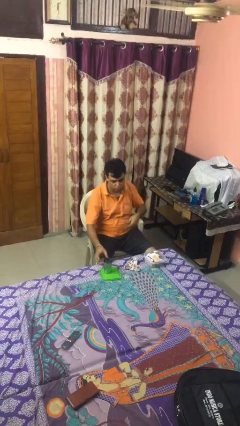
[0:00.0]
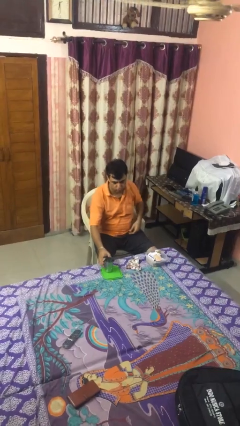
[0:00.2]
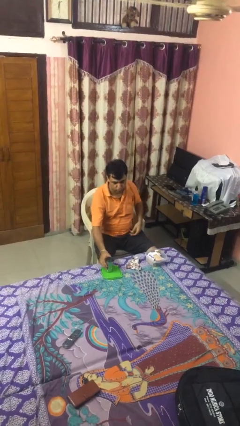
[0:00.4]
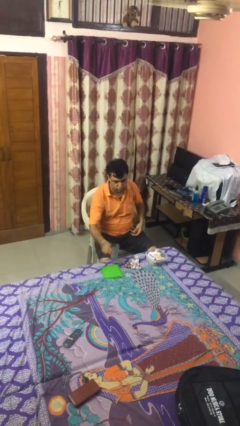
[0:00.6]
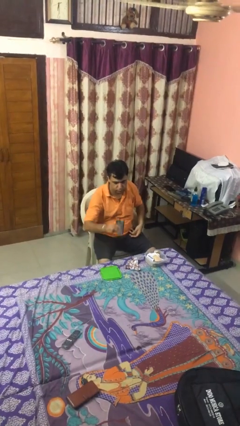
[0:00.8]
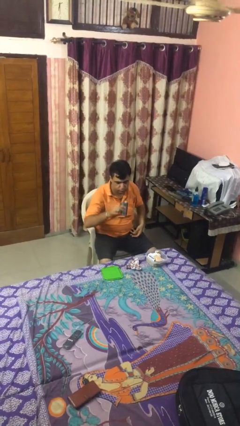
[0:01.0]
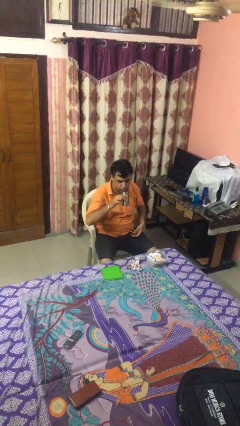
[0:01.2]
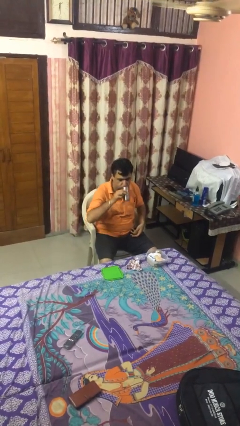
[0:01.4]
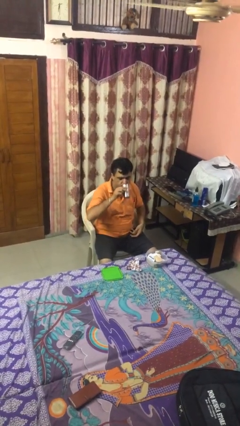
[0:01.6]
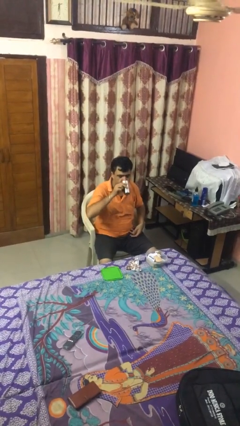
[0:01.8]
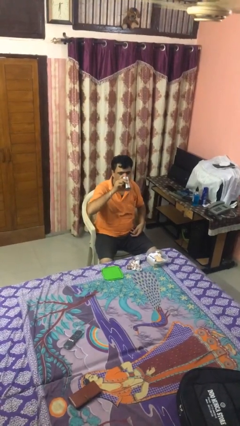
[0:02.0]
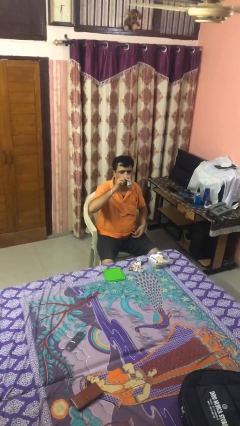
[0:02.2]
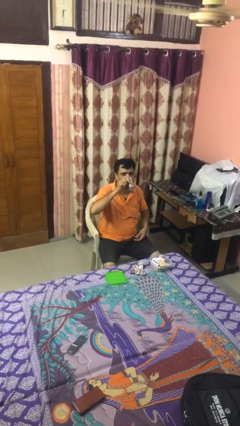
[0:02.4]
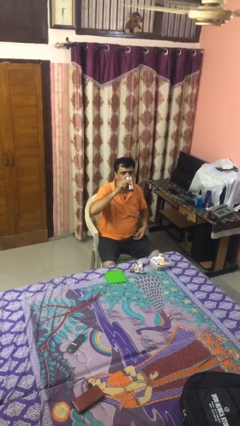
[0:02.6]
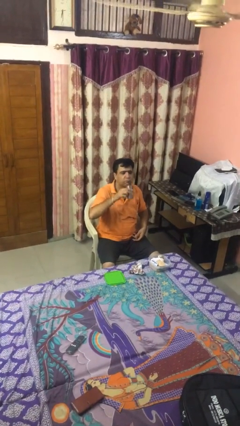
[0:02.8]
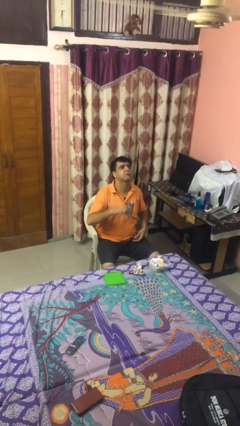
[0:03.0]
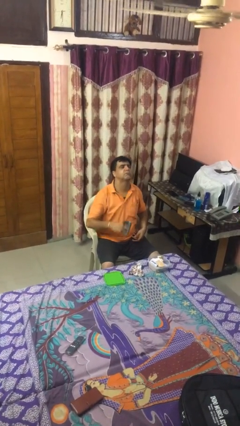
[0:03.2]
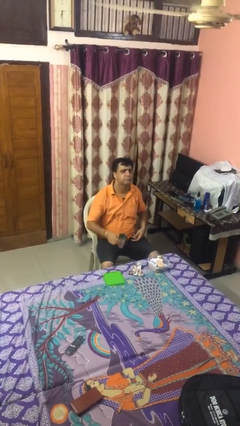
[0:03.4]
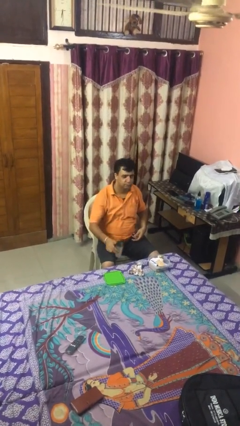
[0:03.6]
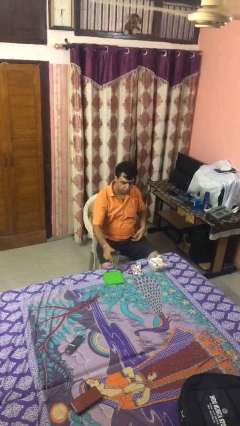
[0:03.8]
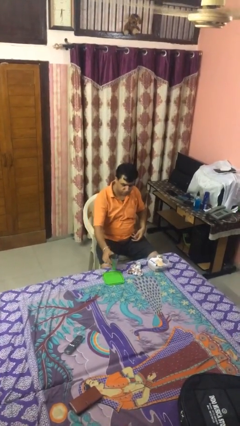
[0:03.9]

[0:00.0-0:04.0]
person drinks from cup

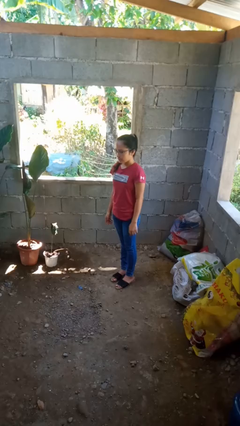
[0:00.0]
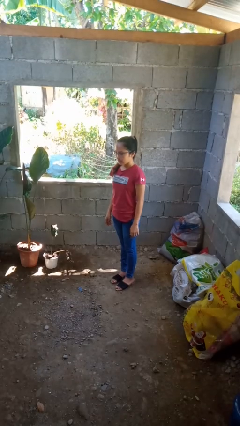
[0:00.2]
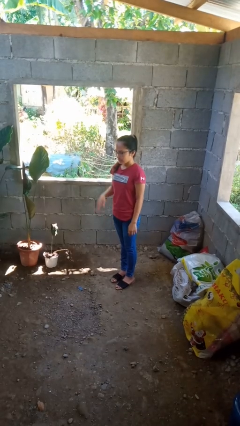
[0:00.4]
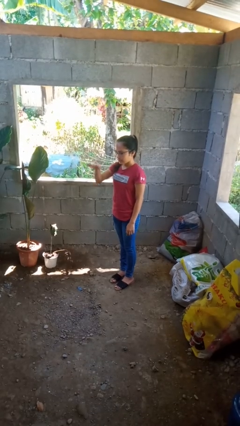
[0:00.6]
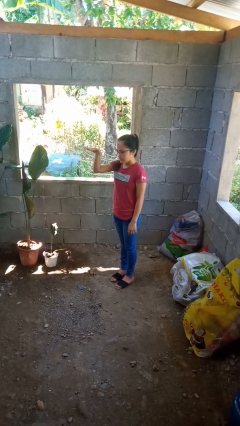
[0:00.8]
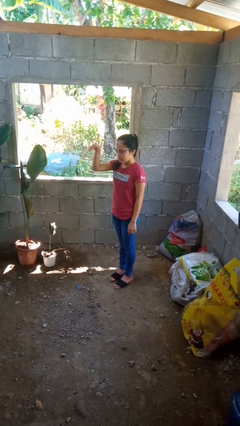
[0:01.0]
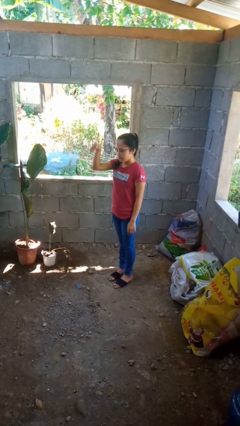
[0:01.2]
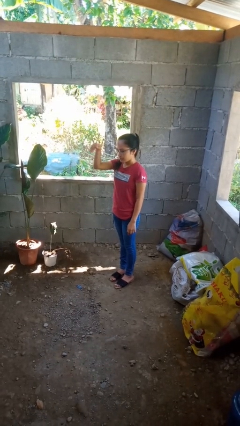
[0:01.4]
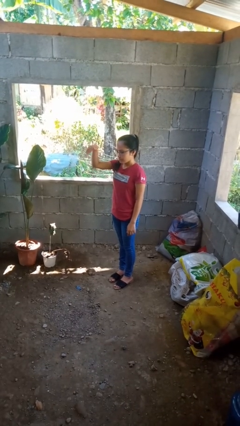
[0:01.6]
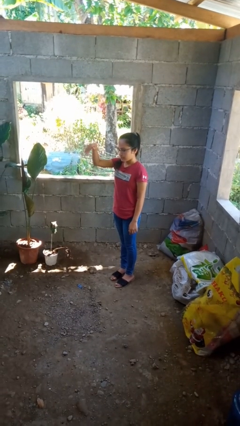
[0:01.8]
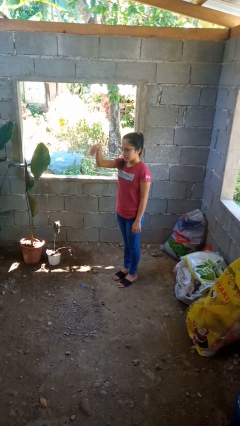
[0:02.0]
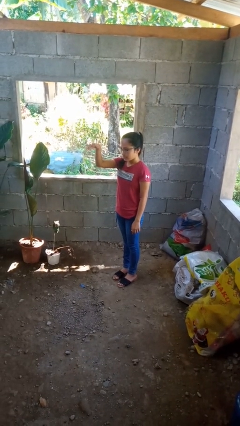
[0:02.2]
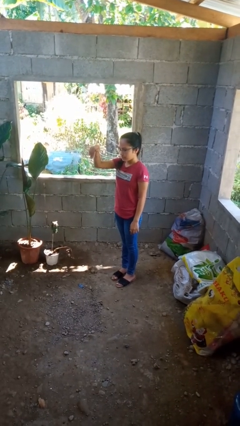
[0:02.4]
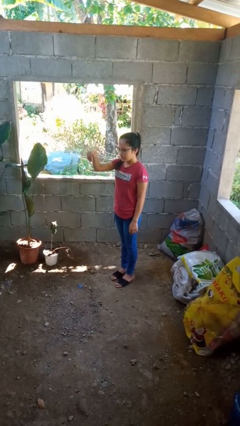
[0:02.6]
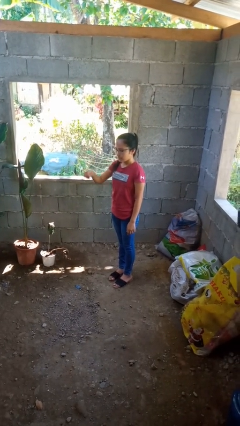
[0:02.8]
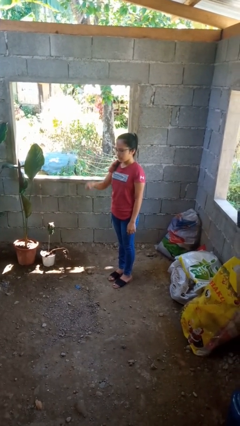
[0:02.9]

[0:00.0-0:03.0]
person gestures come here

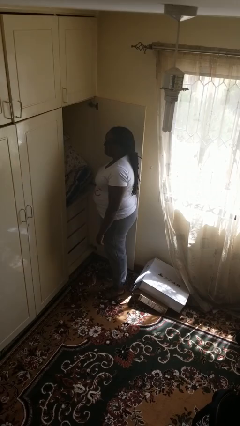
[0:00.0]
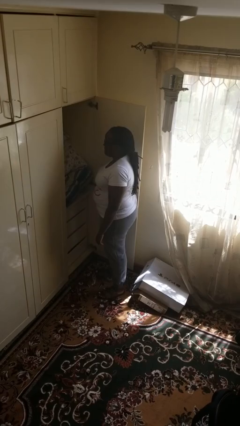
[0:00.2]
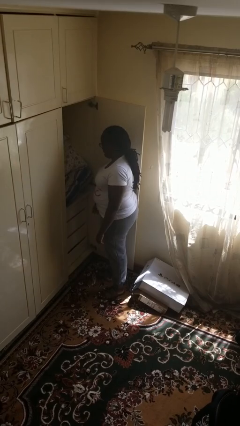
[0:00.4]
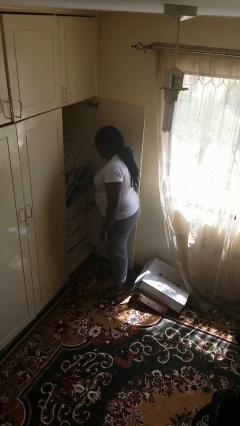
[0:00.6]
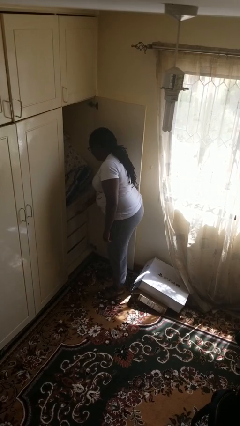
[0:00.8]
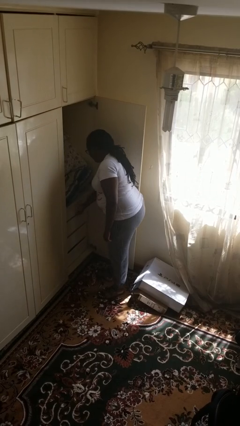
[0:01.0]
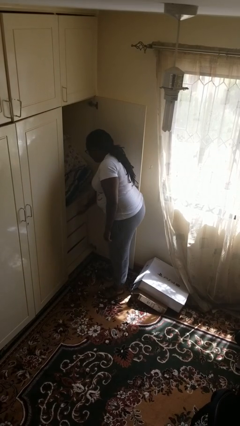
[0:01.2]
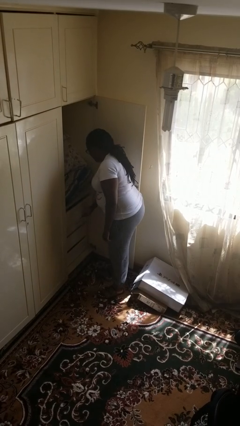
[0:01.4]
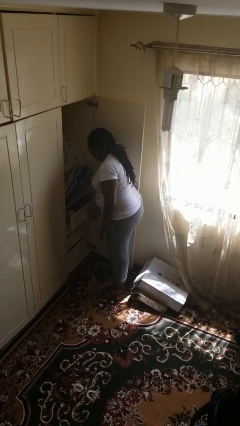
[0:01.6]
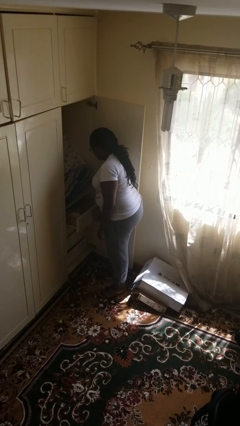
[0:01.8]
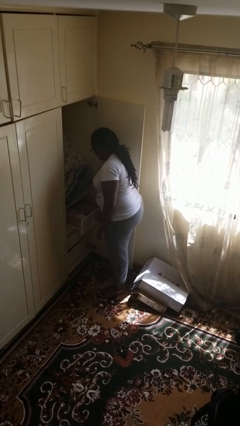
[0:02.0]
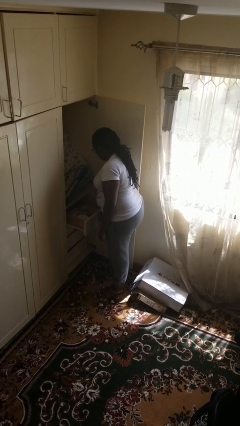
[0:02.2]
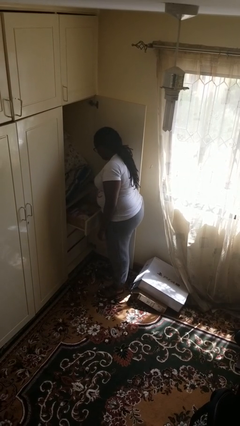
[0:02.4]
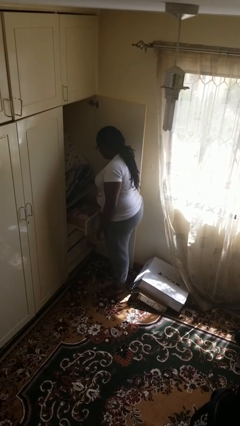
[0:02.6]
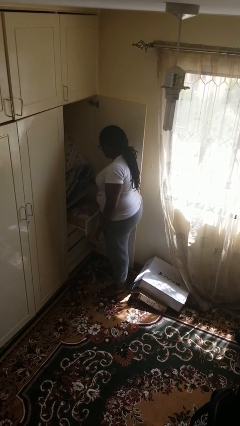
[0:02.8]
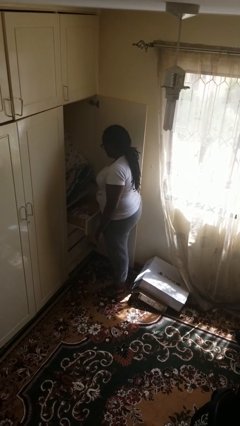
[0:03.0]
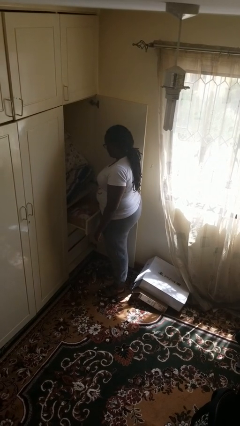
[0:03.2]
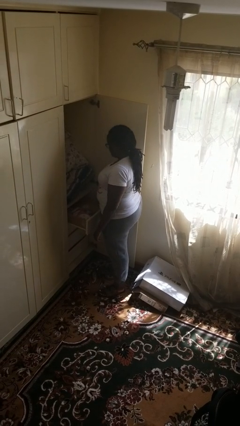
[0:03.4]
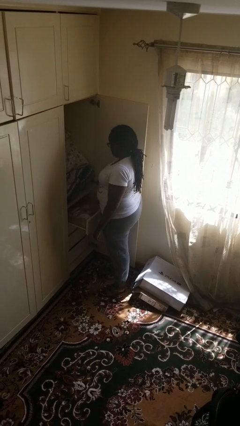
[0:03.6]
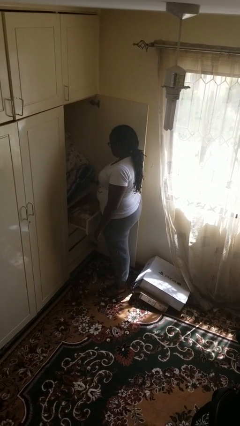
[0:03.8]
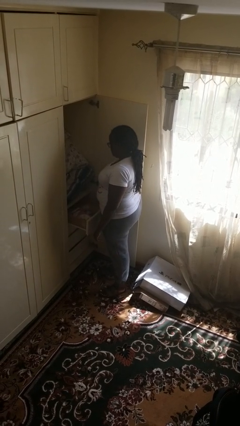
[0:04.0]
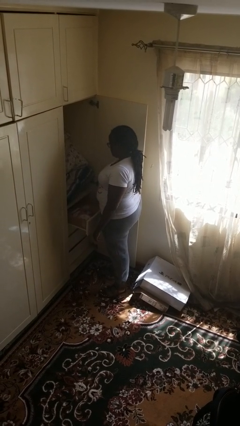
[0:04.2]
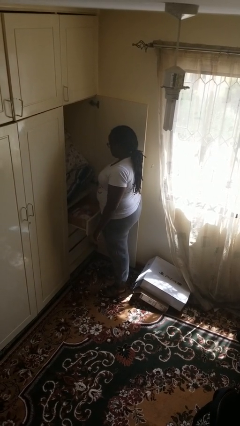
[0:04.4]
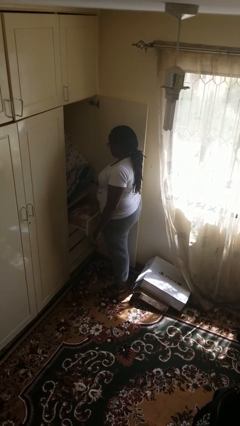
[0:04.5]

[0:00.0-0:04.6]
person opens dresser drawer

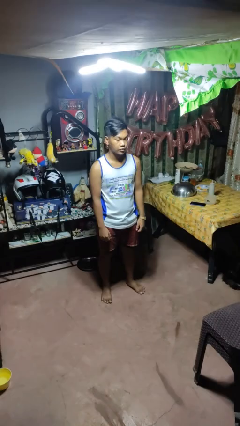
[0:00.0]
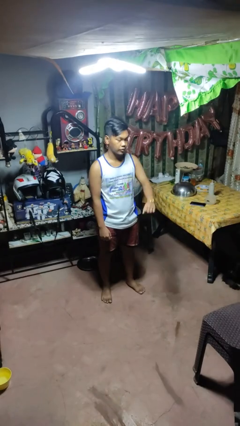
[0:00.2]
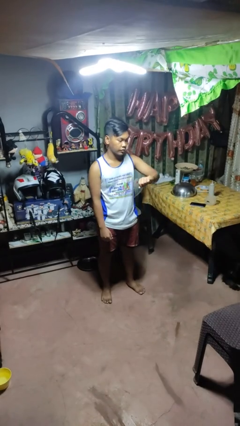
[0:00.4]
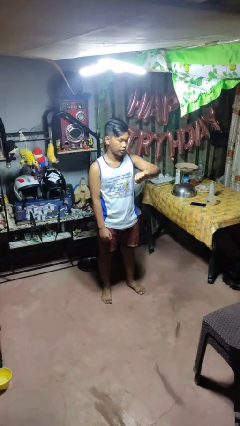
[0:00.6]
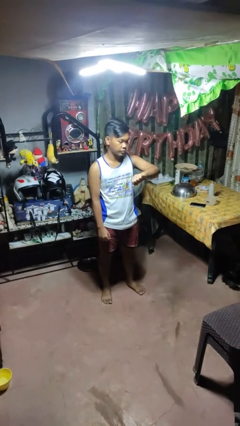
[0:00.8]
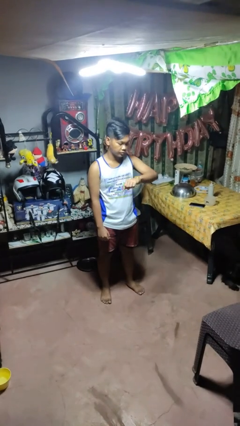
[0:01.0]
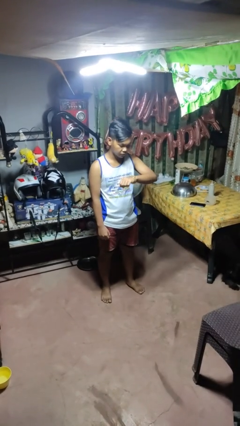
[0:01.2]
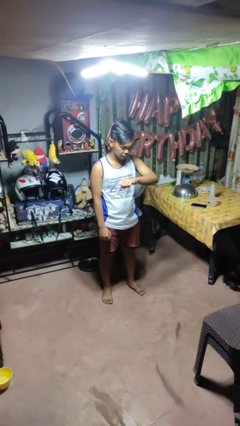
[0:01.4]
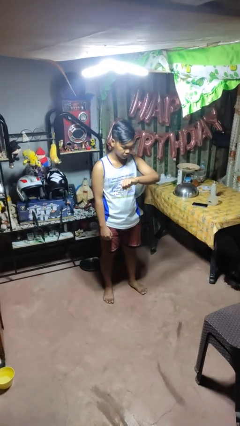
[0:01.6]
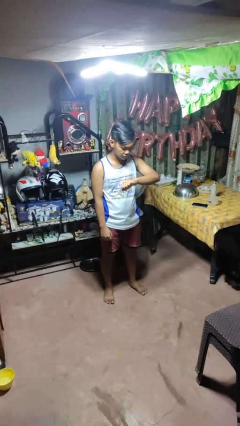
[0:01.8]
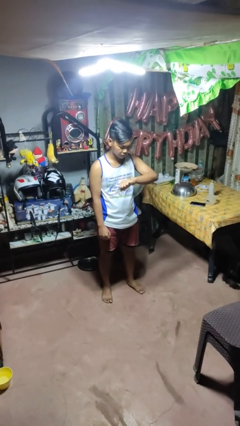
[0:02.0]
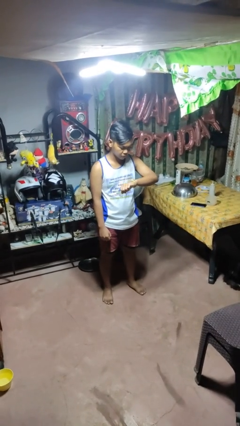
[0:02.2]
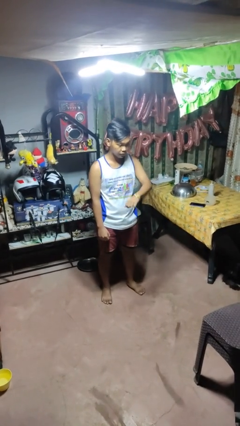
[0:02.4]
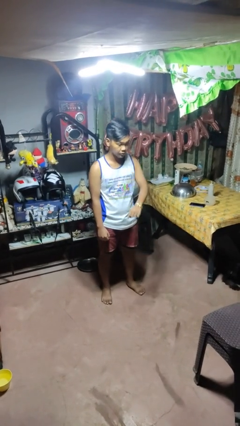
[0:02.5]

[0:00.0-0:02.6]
person looks at wristwatch

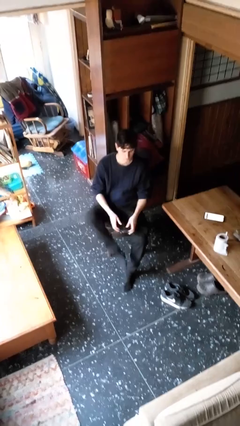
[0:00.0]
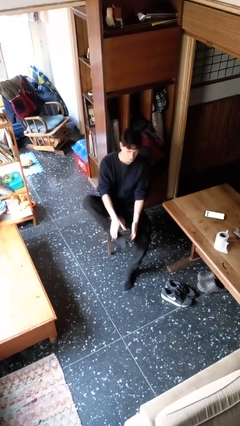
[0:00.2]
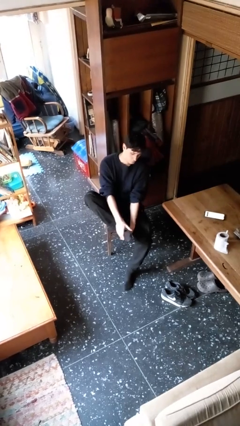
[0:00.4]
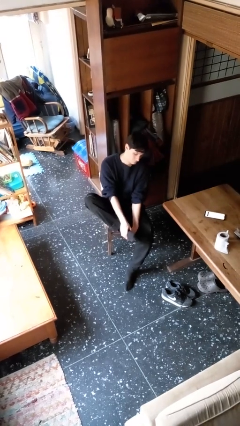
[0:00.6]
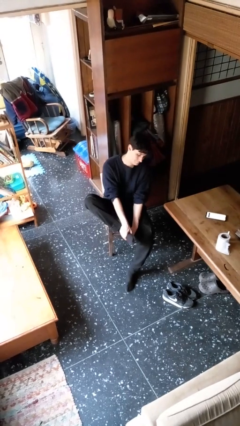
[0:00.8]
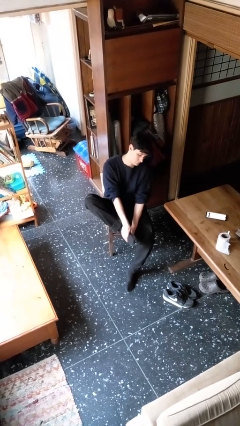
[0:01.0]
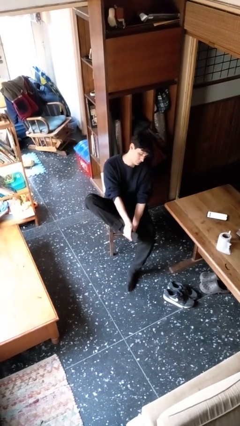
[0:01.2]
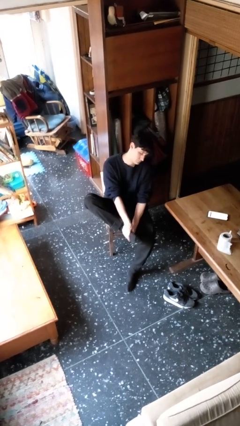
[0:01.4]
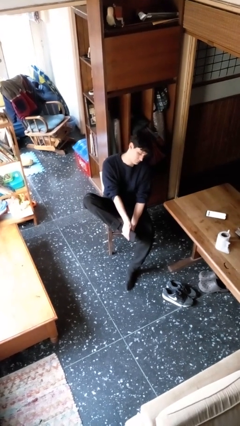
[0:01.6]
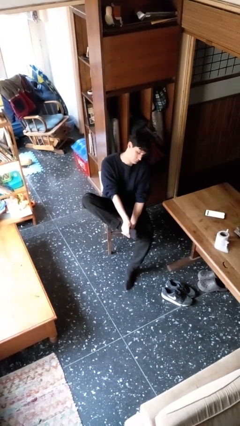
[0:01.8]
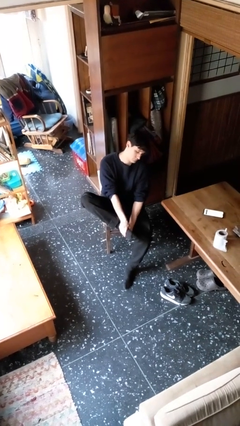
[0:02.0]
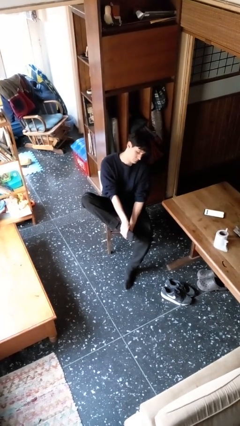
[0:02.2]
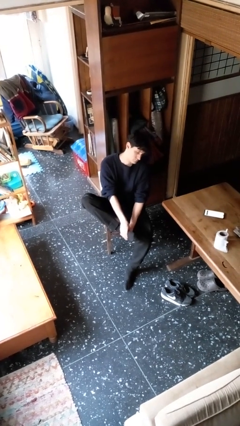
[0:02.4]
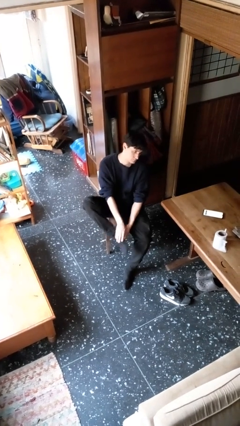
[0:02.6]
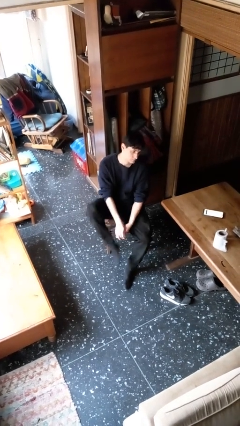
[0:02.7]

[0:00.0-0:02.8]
person rubs foot

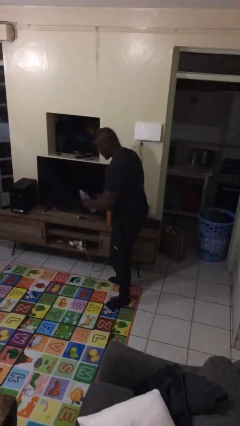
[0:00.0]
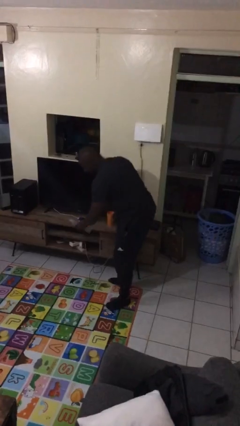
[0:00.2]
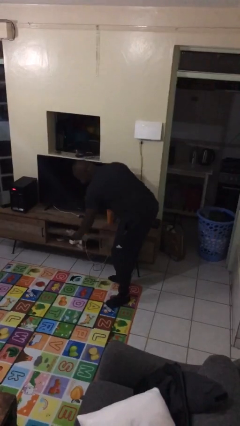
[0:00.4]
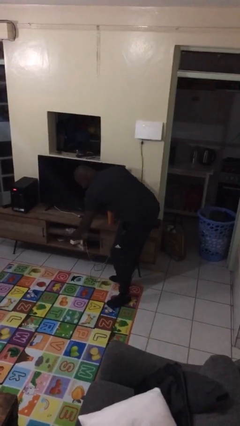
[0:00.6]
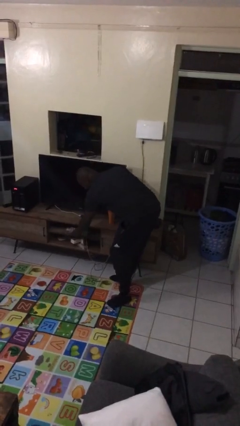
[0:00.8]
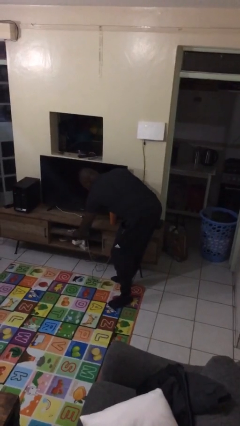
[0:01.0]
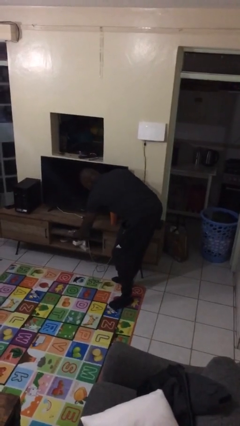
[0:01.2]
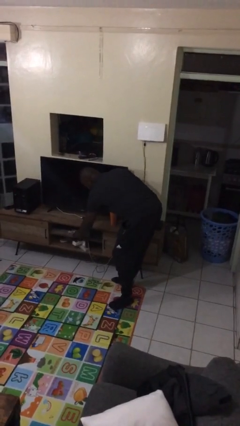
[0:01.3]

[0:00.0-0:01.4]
person puts down object into cabinet
